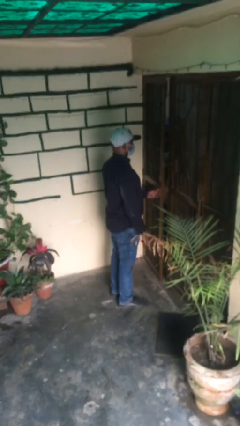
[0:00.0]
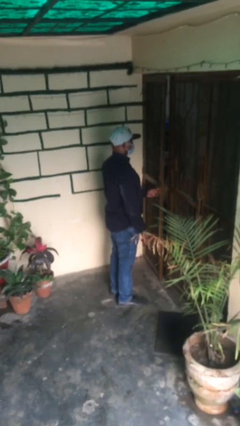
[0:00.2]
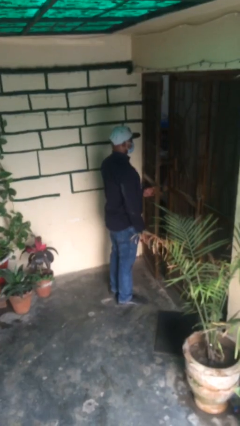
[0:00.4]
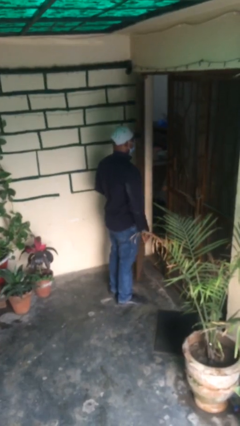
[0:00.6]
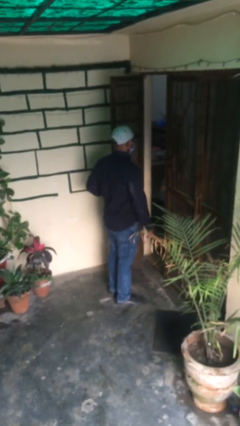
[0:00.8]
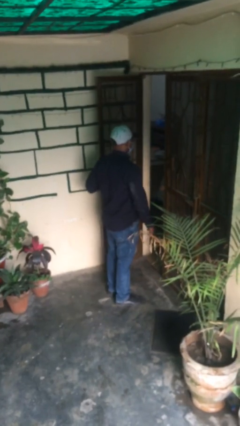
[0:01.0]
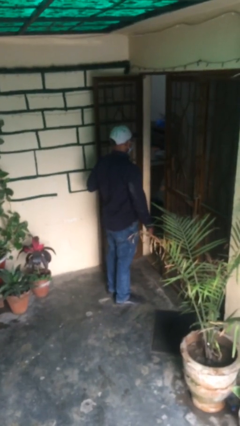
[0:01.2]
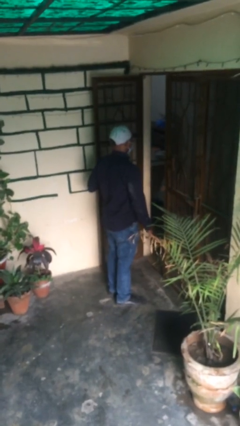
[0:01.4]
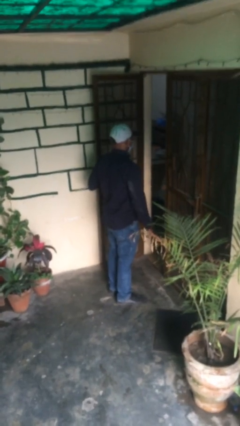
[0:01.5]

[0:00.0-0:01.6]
person opens facility door

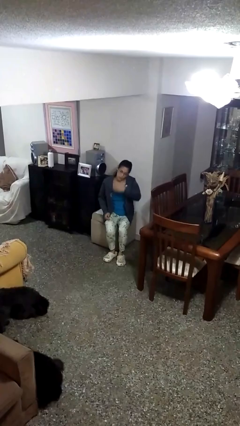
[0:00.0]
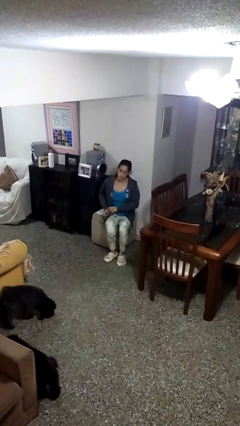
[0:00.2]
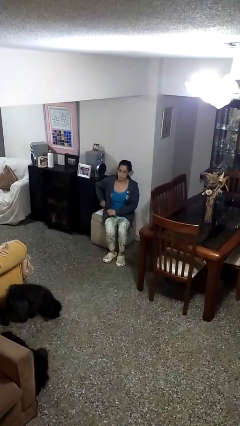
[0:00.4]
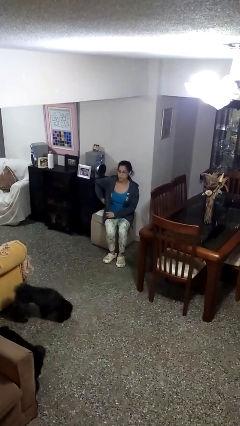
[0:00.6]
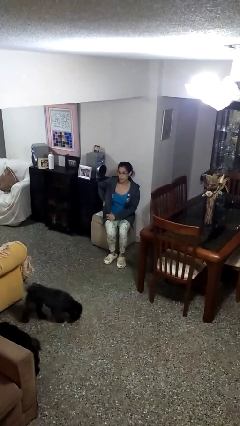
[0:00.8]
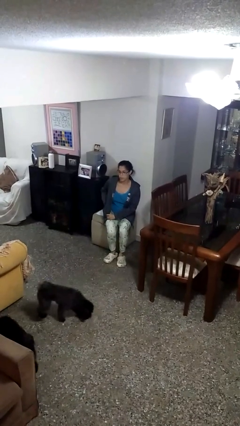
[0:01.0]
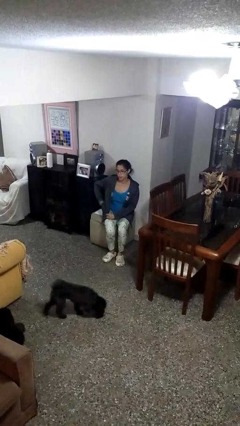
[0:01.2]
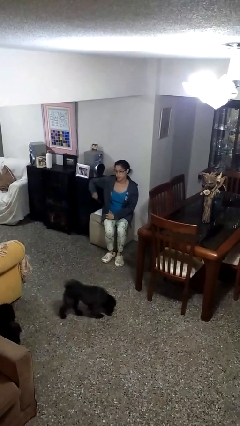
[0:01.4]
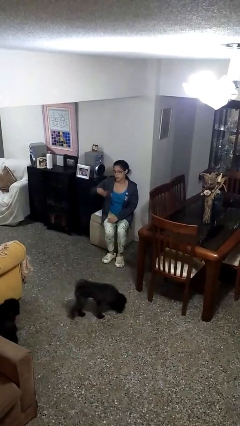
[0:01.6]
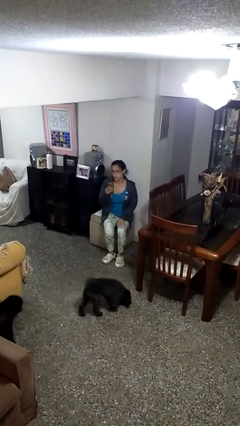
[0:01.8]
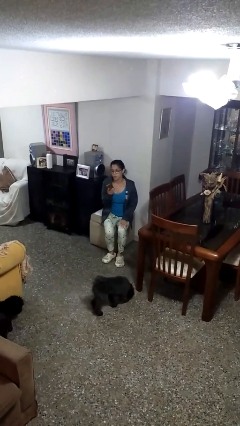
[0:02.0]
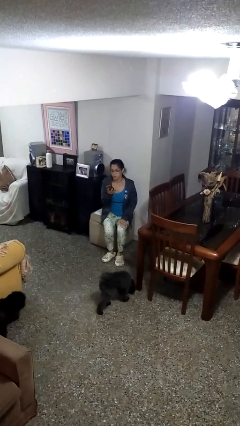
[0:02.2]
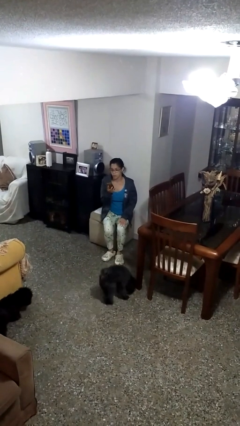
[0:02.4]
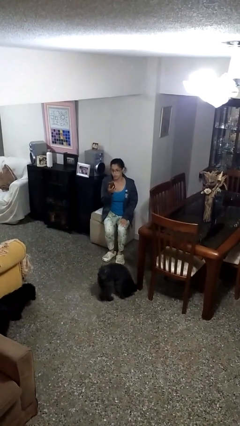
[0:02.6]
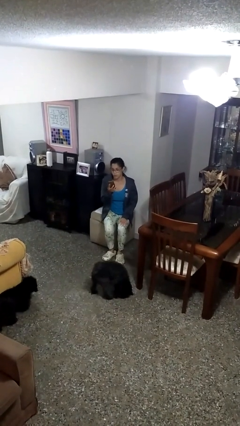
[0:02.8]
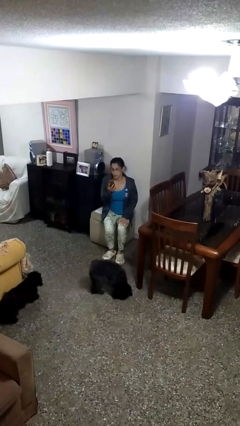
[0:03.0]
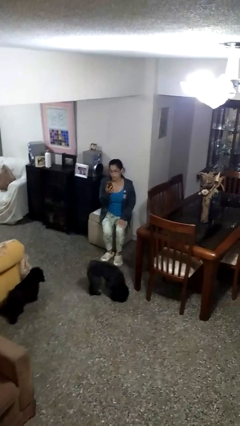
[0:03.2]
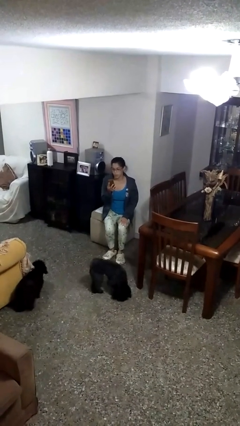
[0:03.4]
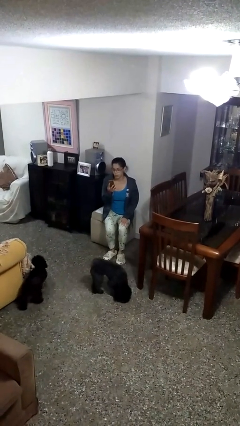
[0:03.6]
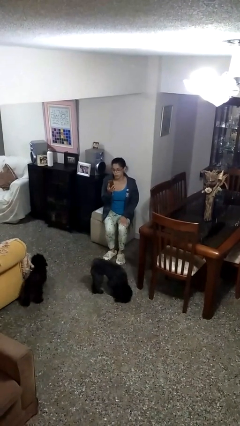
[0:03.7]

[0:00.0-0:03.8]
person takes phone from pocket

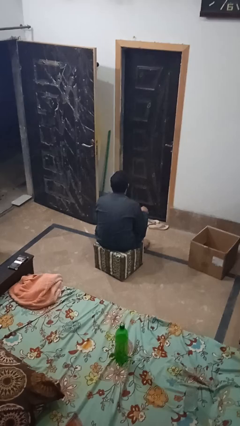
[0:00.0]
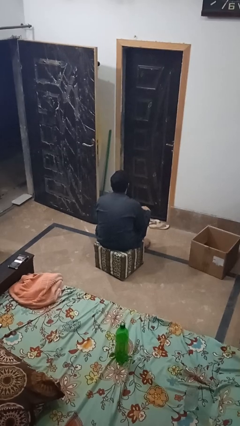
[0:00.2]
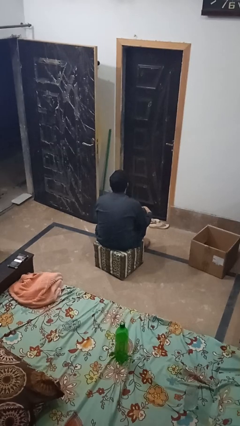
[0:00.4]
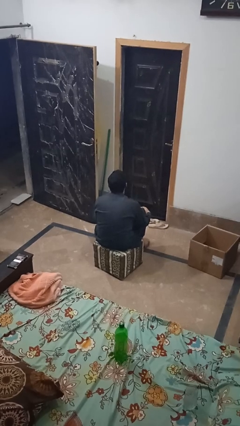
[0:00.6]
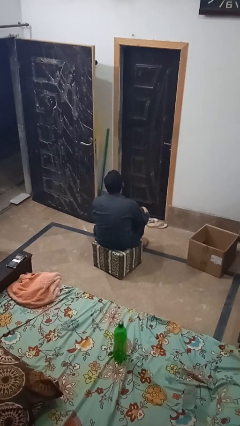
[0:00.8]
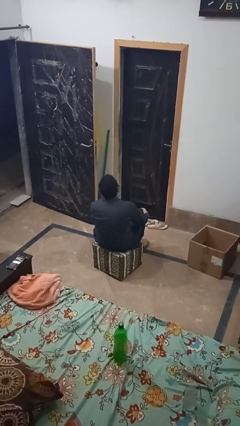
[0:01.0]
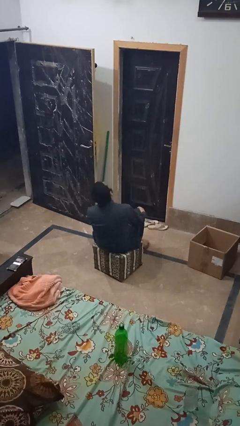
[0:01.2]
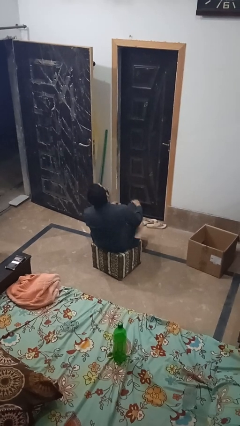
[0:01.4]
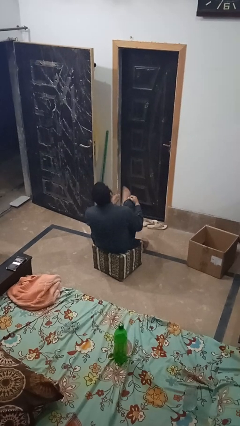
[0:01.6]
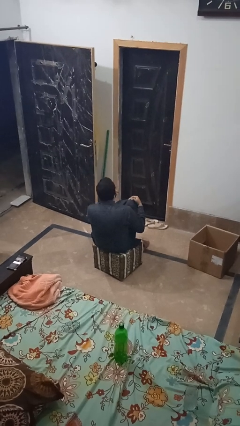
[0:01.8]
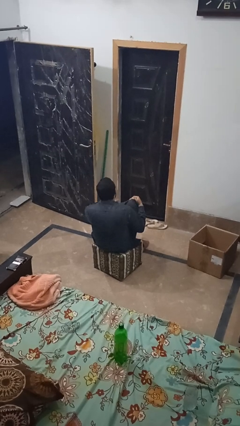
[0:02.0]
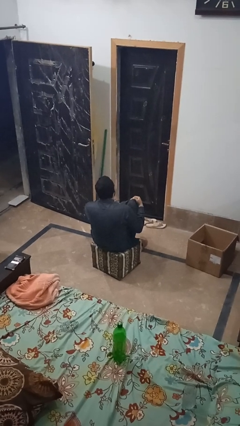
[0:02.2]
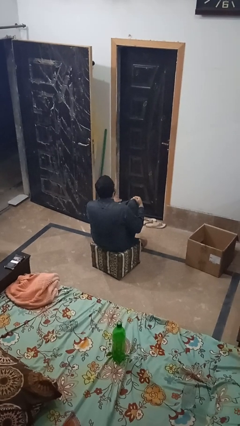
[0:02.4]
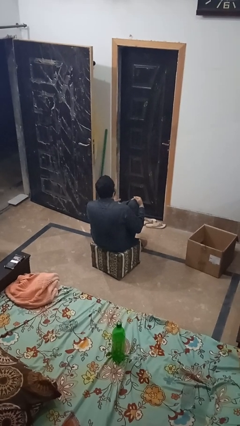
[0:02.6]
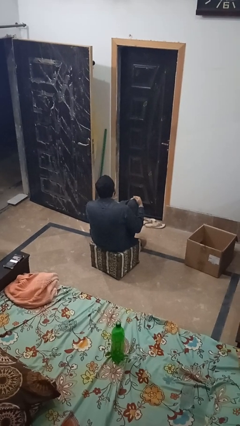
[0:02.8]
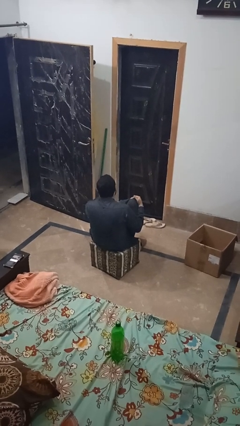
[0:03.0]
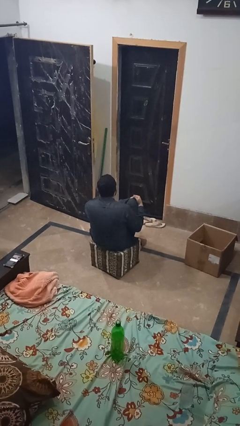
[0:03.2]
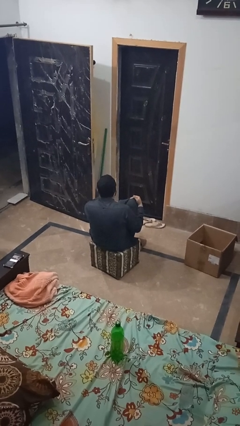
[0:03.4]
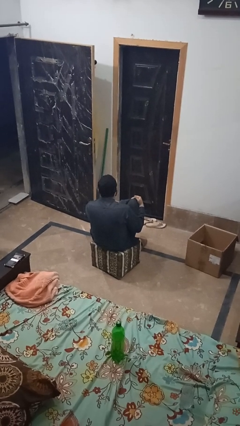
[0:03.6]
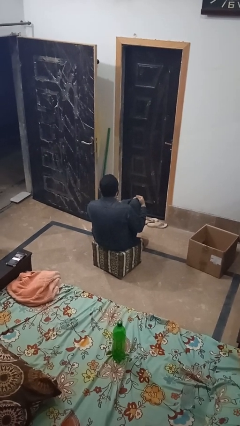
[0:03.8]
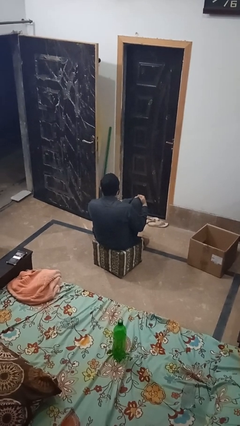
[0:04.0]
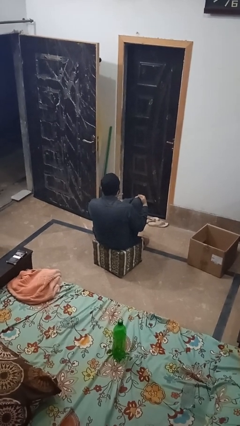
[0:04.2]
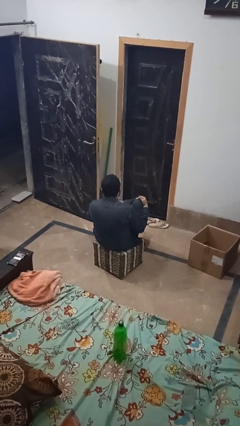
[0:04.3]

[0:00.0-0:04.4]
person rubs foot

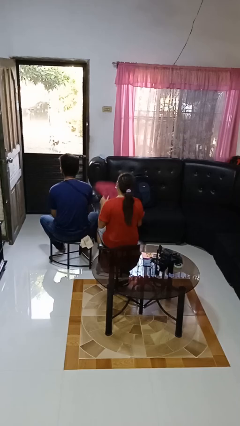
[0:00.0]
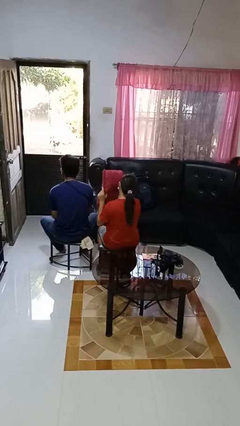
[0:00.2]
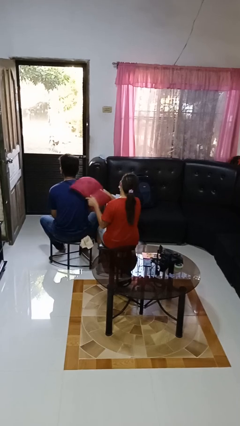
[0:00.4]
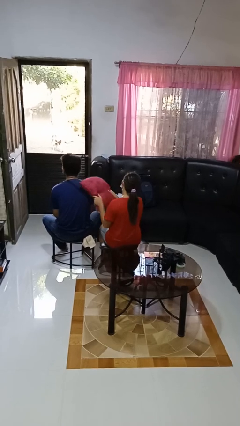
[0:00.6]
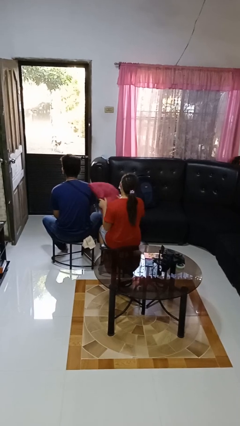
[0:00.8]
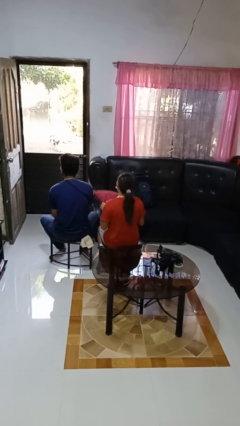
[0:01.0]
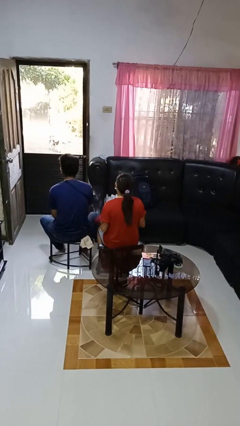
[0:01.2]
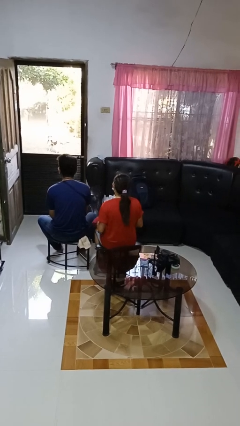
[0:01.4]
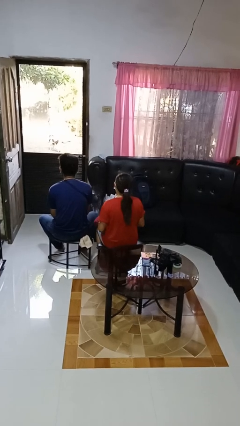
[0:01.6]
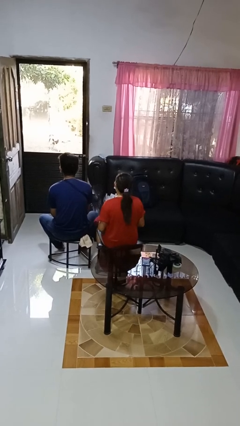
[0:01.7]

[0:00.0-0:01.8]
person hits person with pillow

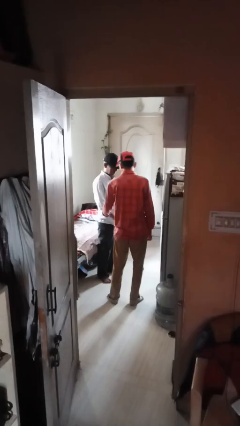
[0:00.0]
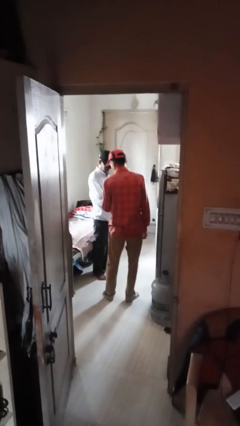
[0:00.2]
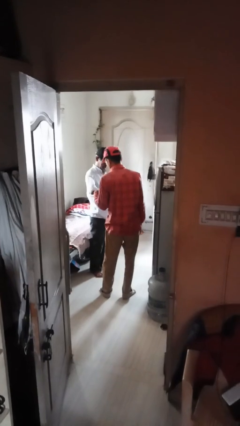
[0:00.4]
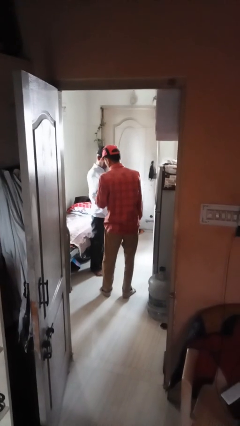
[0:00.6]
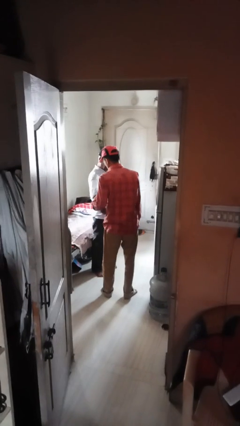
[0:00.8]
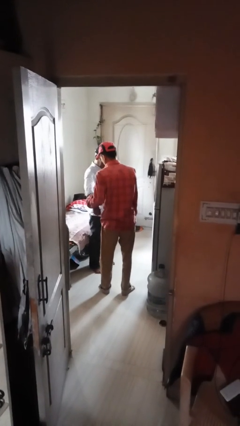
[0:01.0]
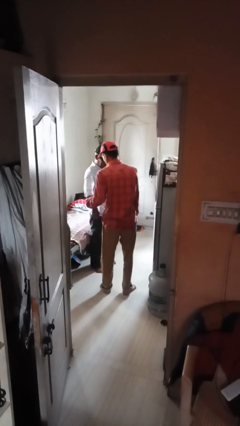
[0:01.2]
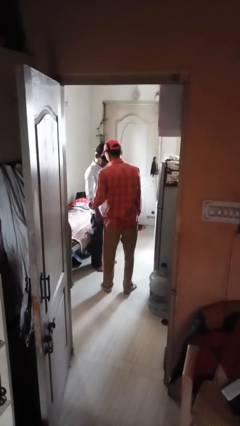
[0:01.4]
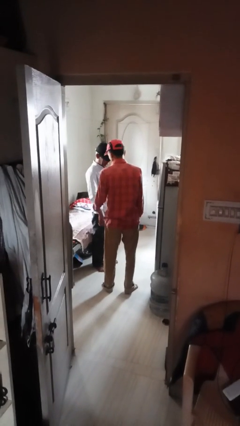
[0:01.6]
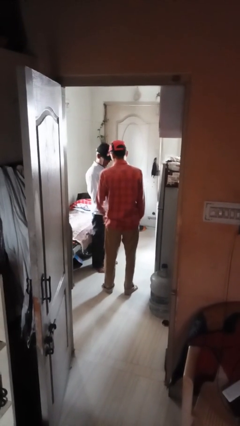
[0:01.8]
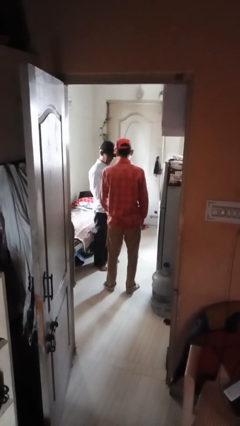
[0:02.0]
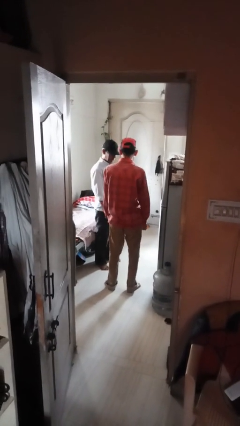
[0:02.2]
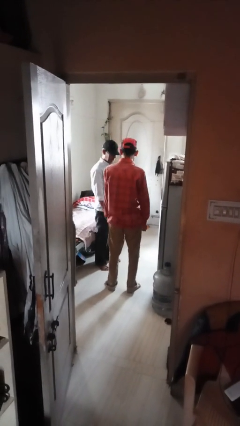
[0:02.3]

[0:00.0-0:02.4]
person grabs person by forearm

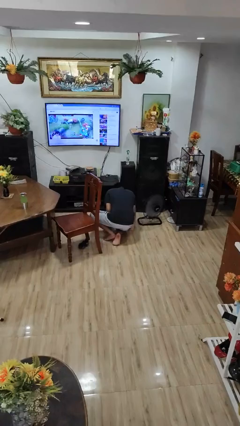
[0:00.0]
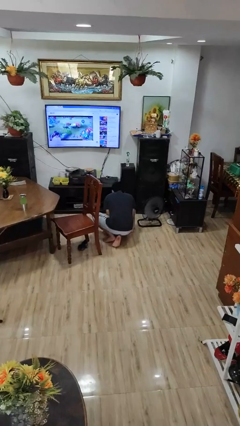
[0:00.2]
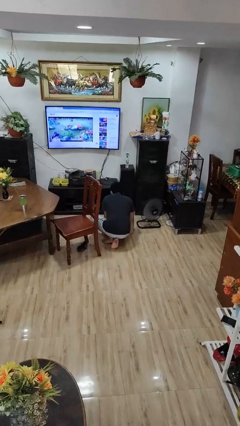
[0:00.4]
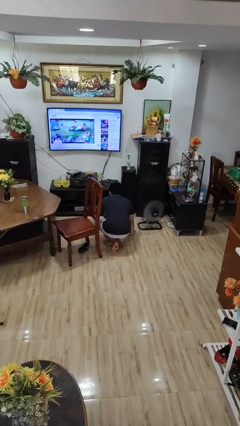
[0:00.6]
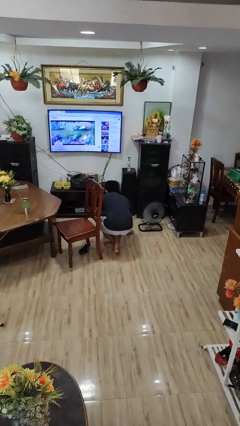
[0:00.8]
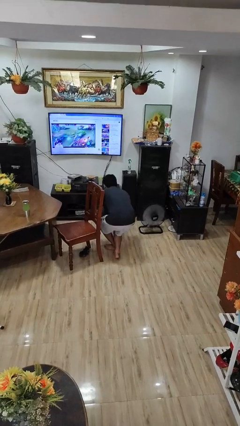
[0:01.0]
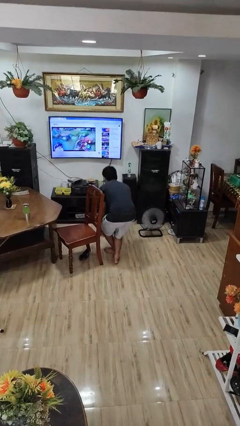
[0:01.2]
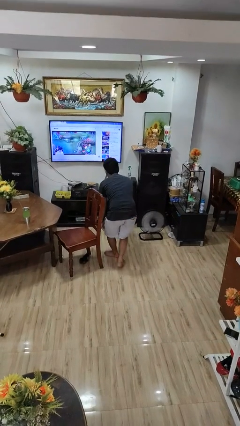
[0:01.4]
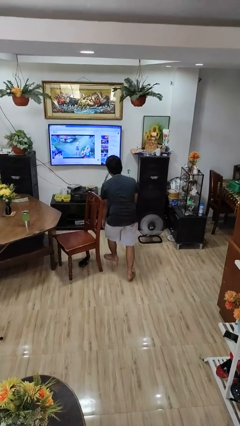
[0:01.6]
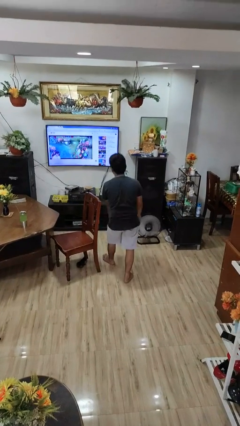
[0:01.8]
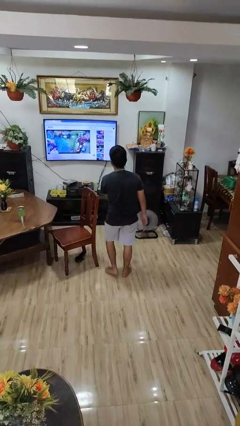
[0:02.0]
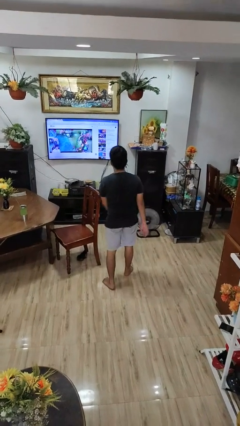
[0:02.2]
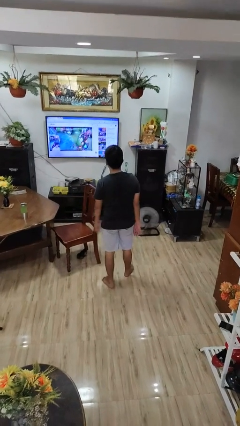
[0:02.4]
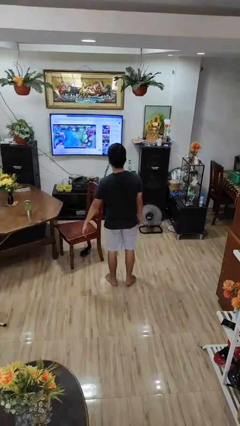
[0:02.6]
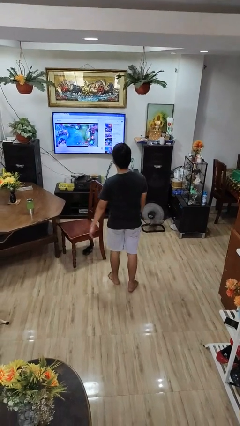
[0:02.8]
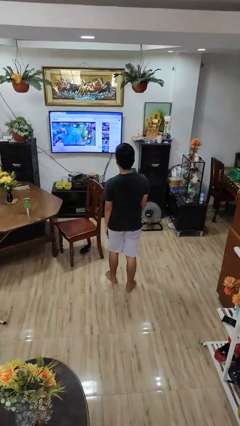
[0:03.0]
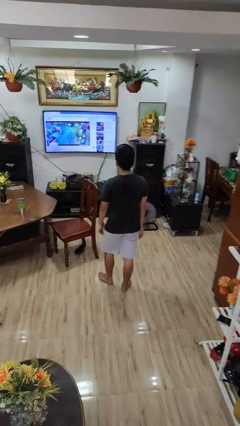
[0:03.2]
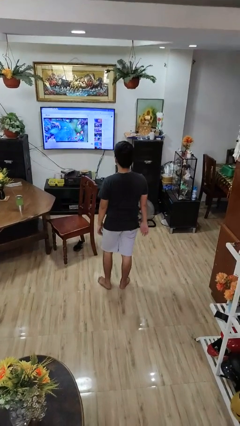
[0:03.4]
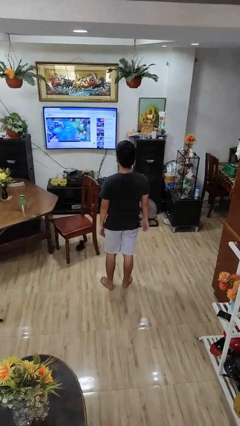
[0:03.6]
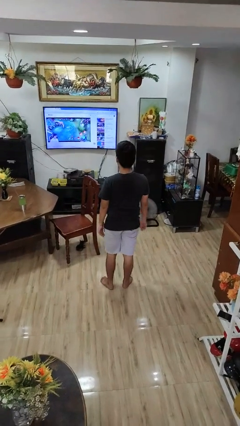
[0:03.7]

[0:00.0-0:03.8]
person stands up from floor
